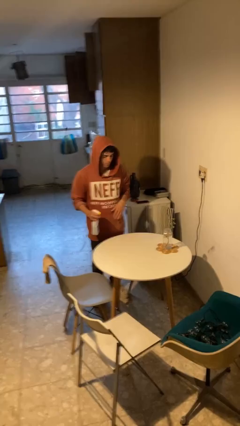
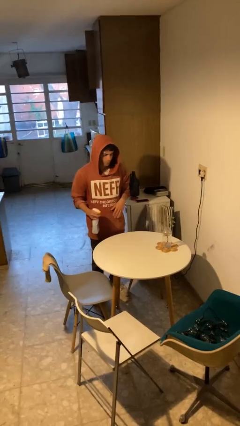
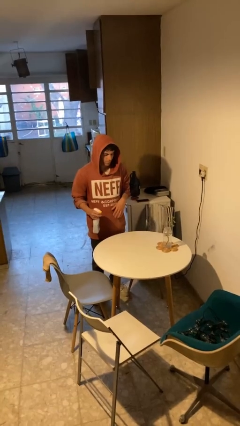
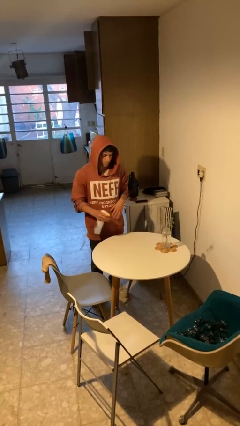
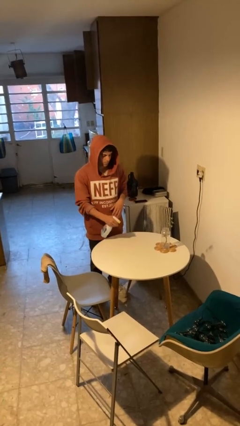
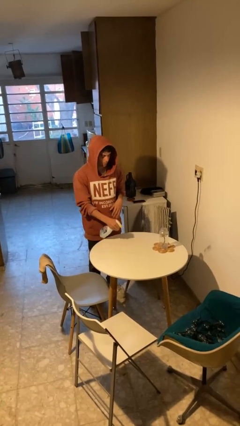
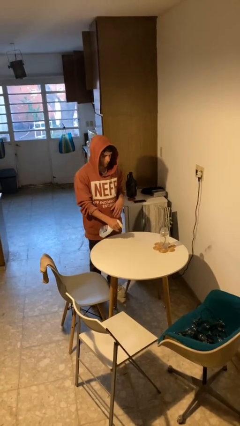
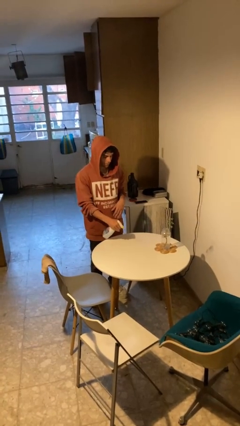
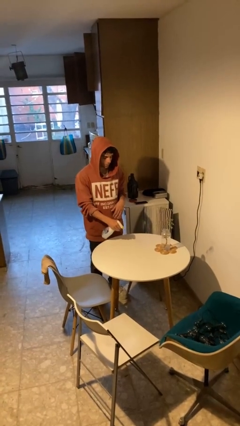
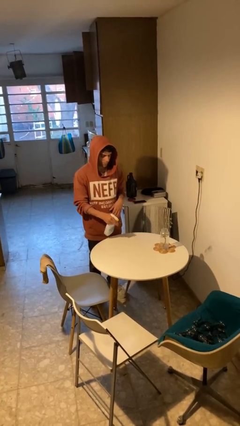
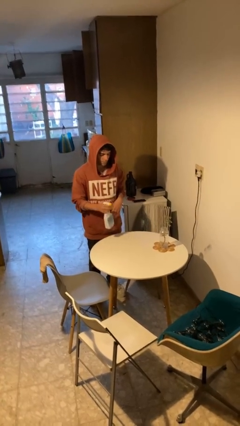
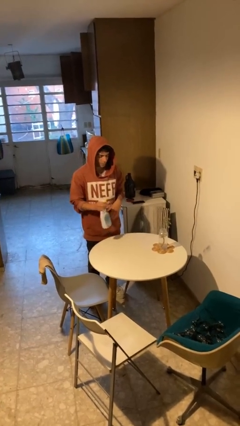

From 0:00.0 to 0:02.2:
person sprays from bottle

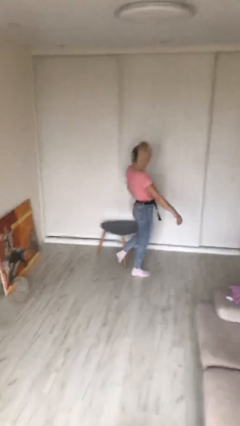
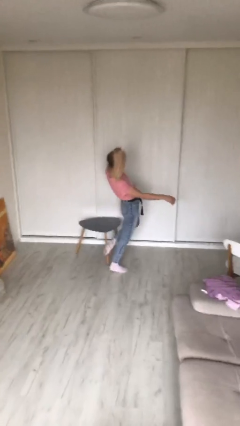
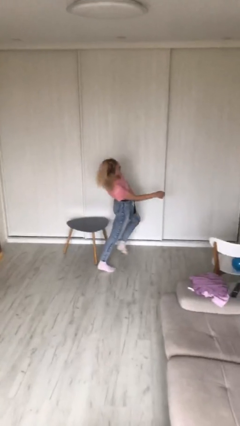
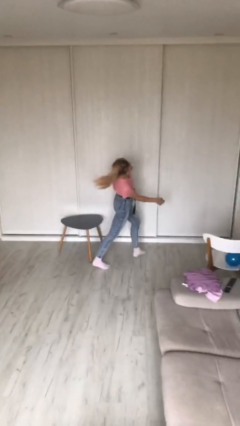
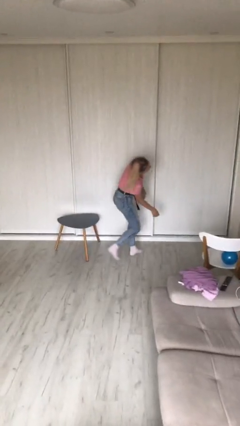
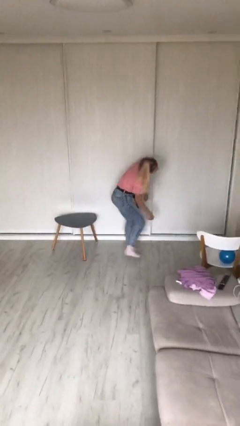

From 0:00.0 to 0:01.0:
person bumps into table

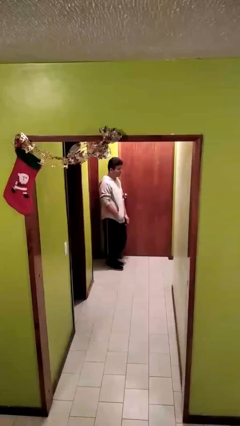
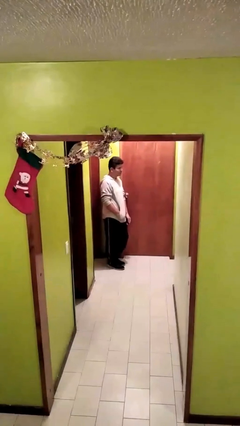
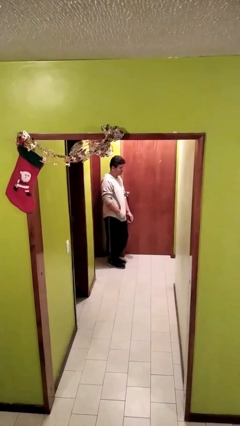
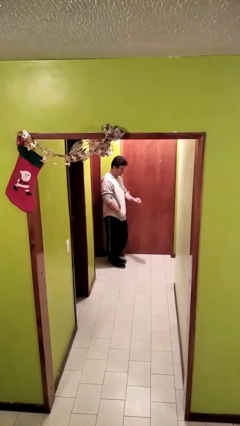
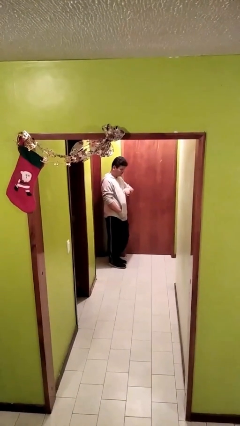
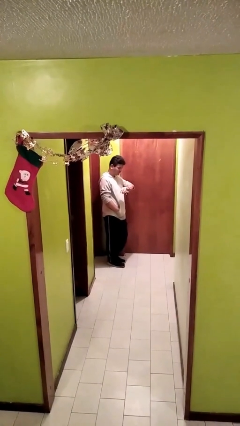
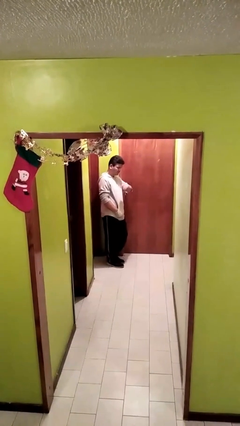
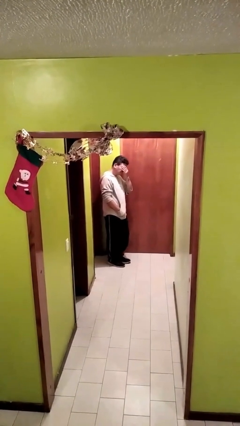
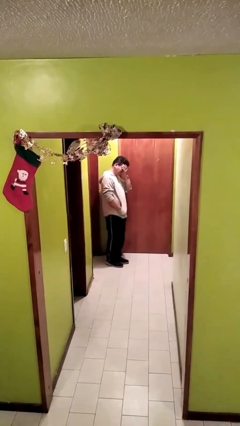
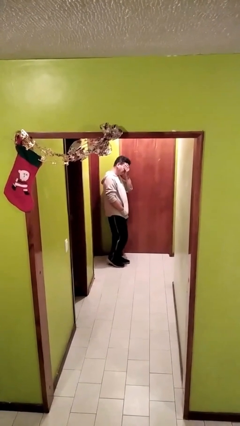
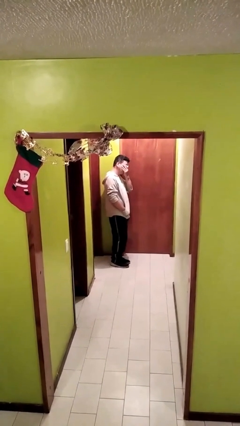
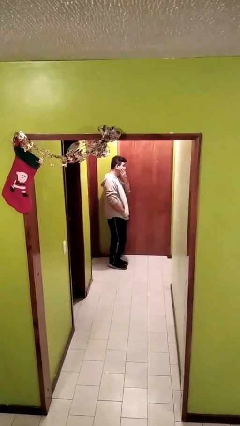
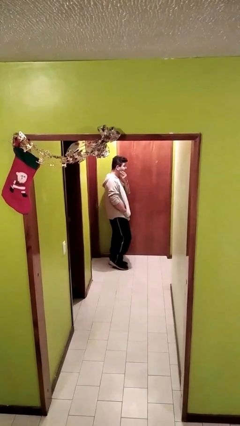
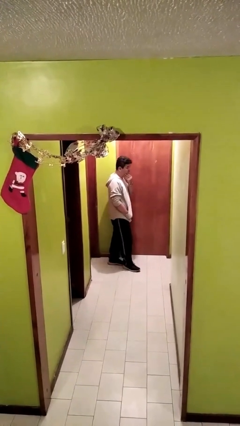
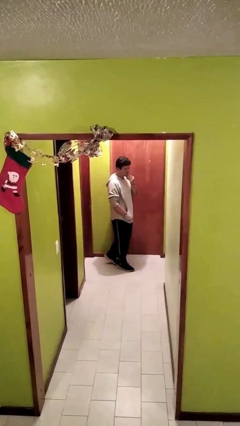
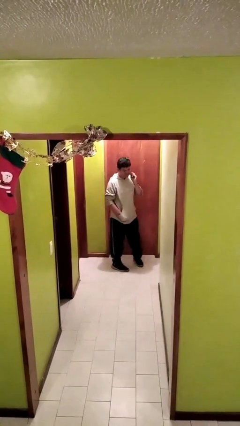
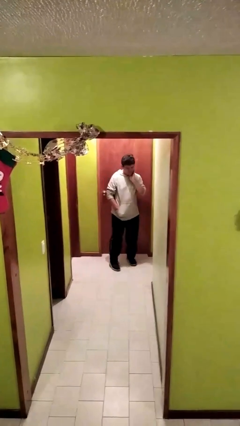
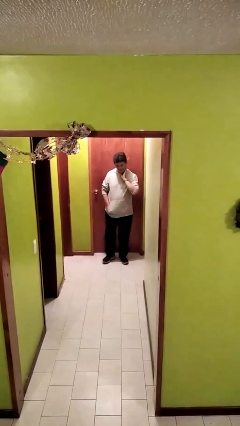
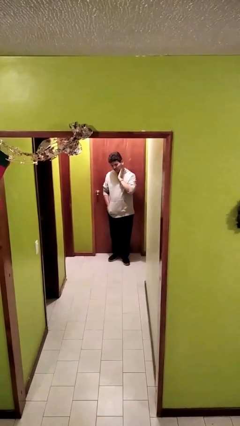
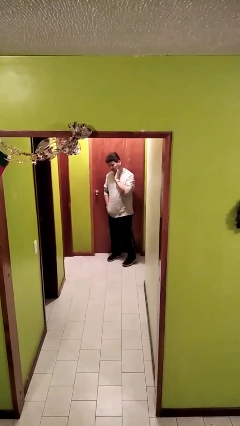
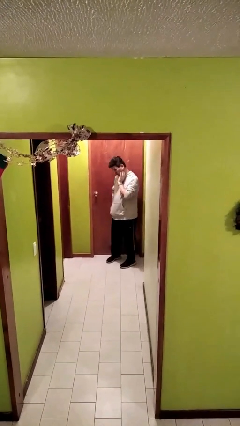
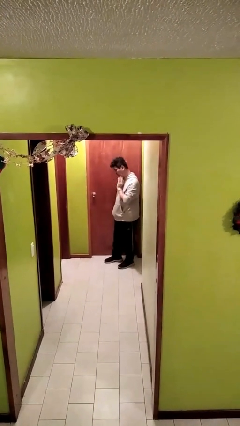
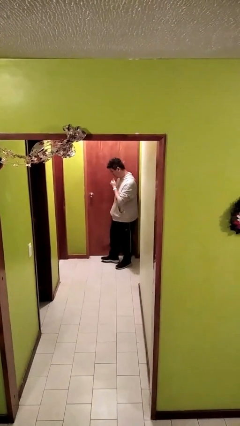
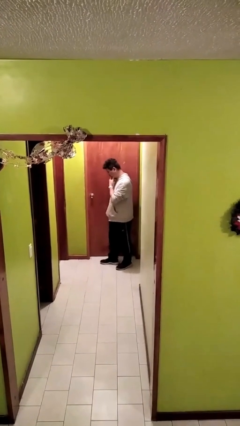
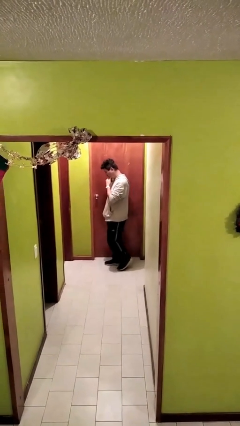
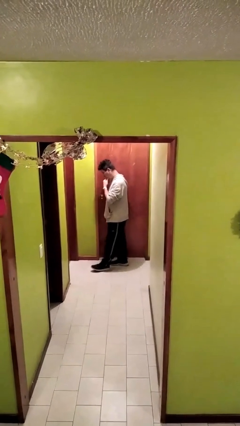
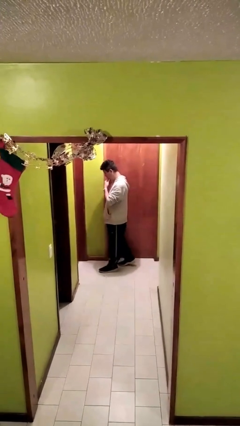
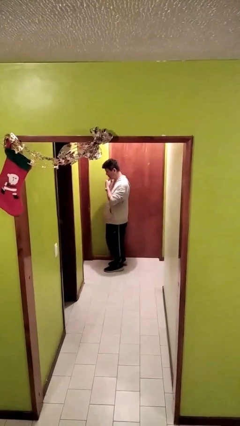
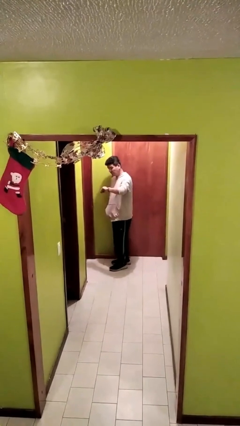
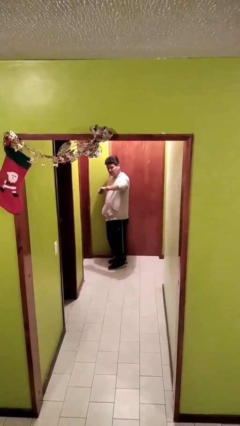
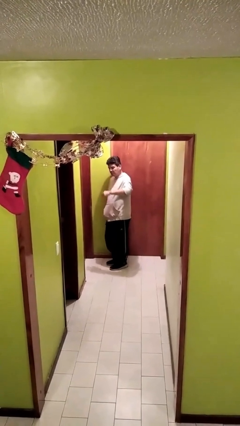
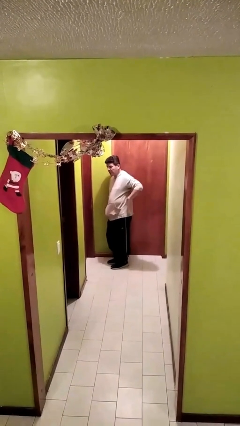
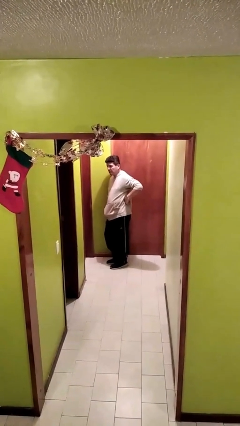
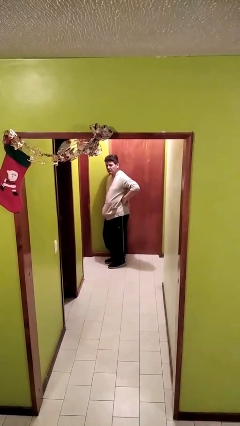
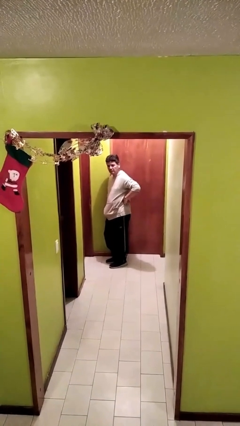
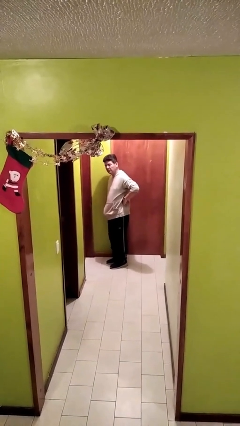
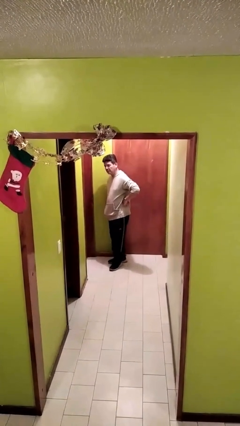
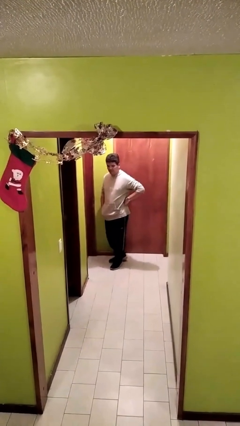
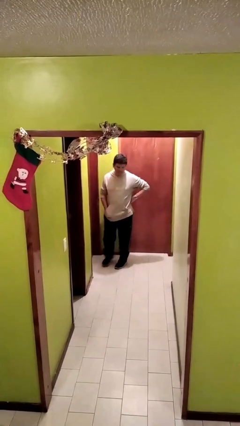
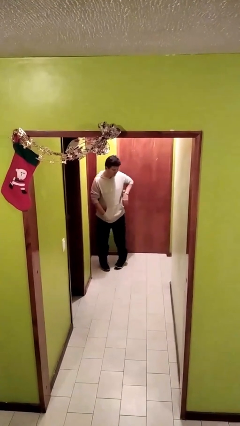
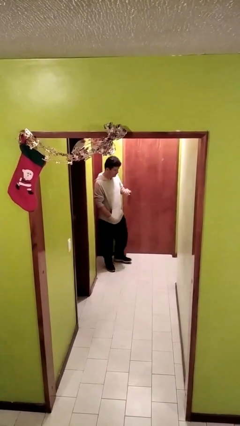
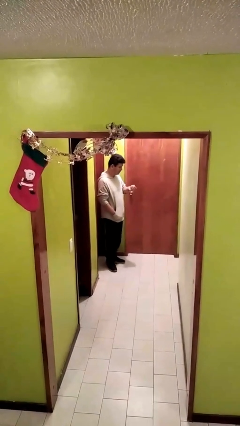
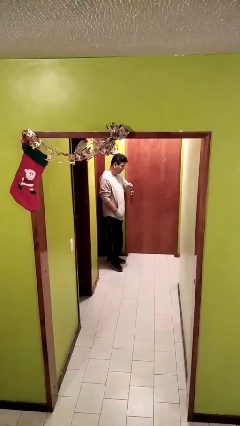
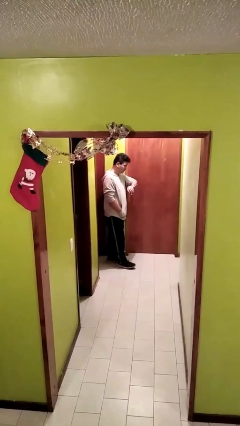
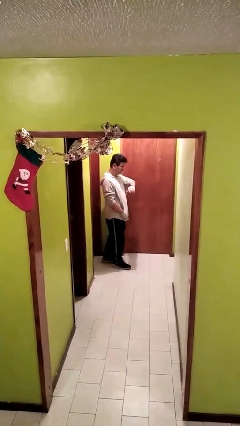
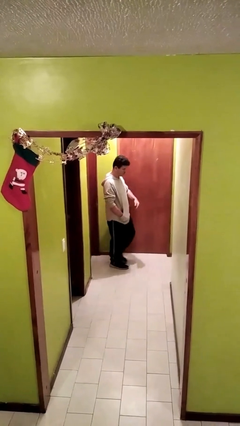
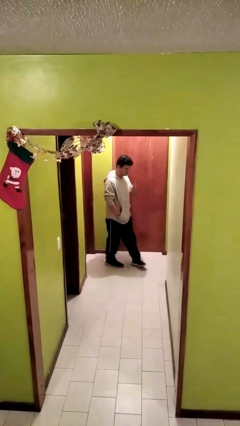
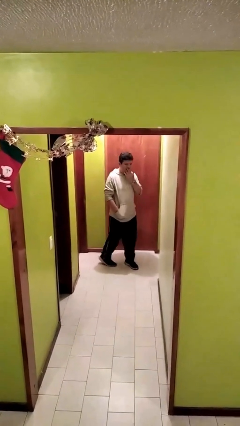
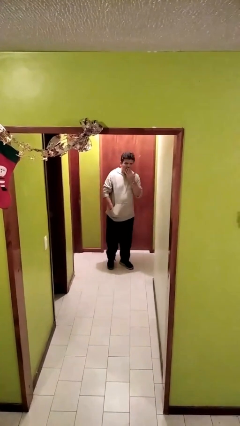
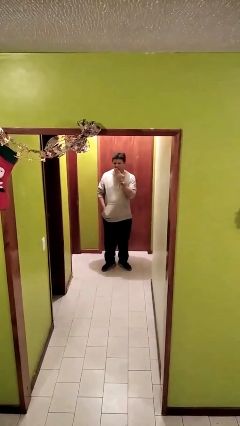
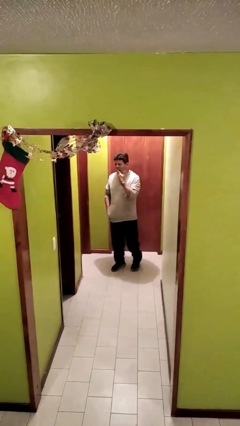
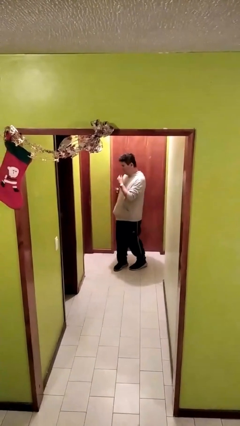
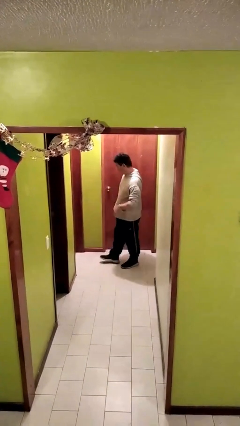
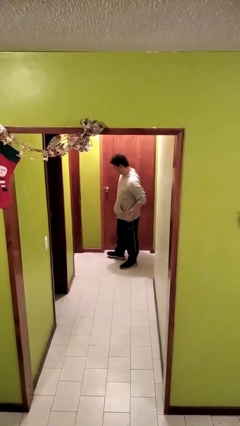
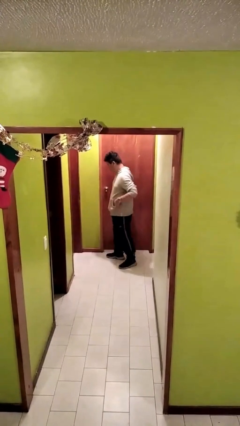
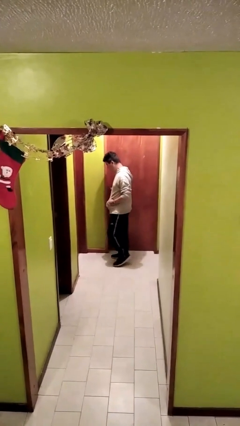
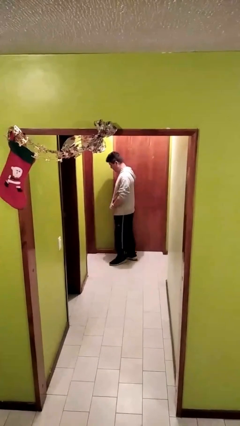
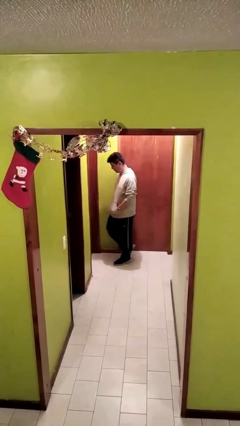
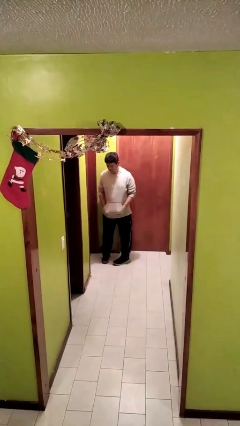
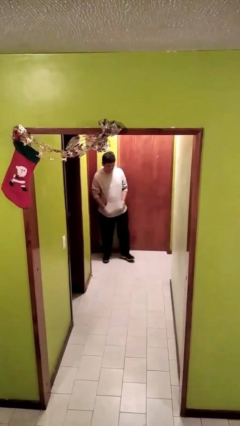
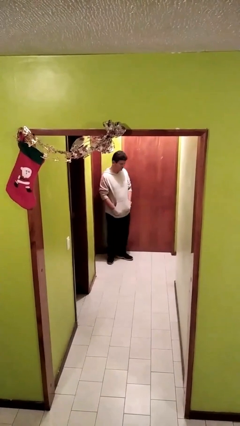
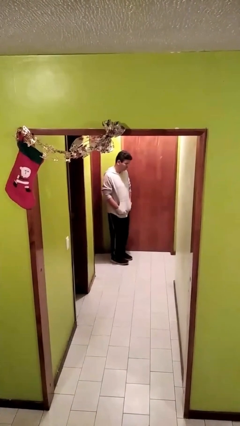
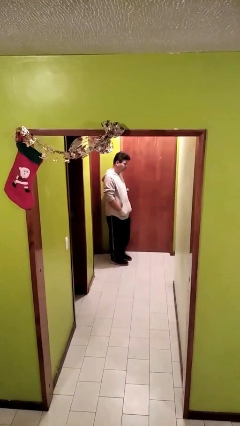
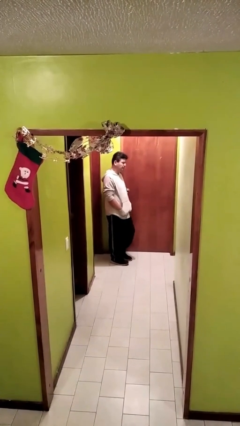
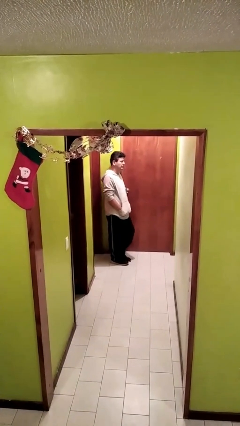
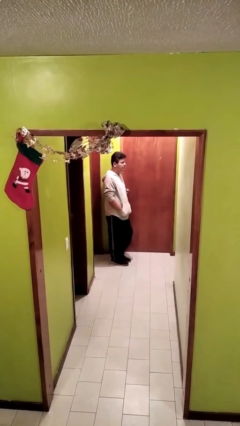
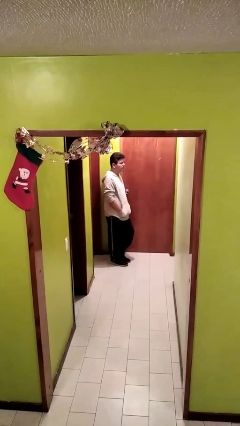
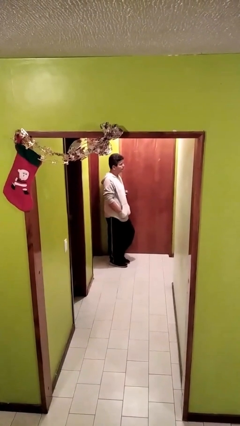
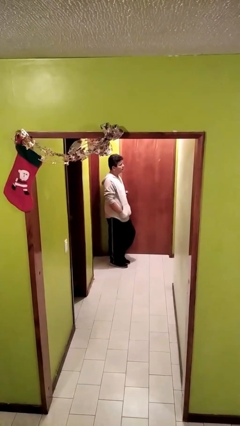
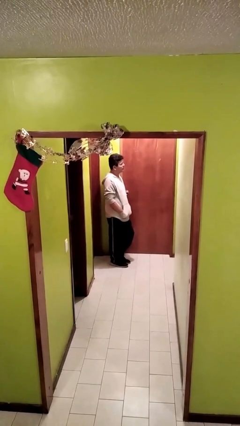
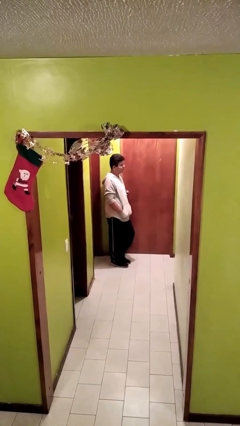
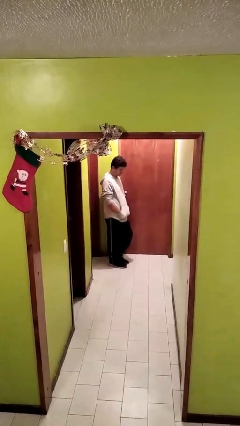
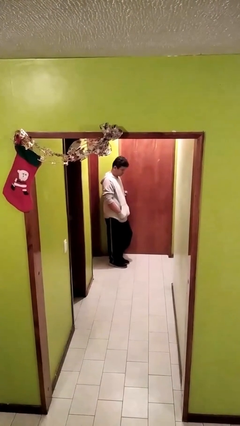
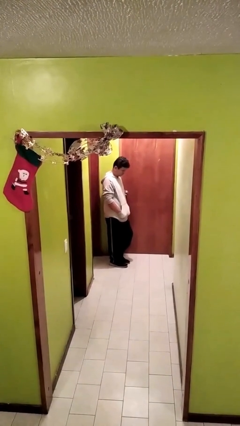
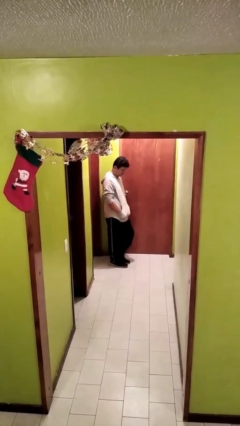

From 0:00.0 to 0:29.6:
person walks
